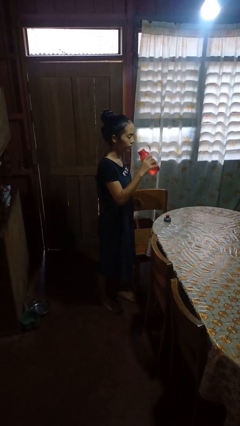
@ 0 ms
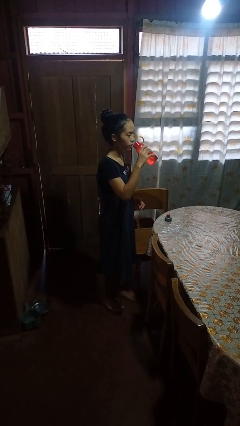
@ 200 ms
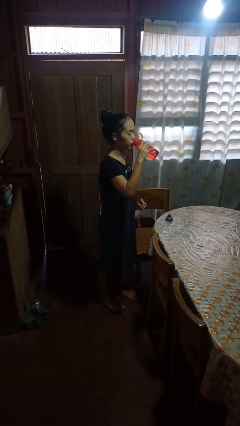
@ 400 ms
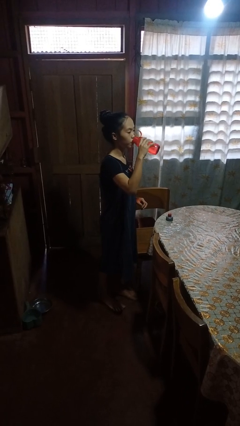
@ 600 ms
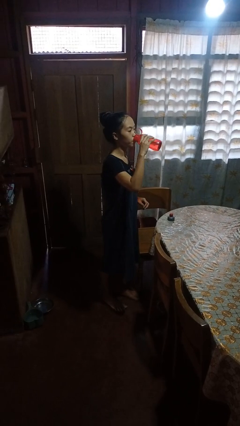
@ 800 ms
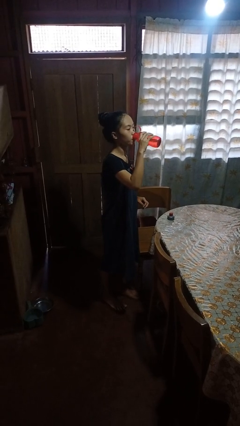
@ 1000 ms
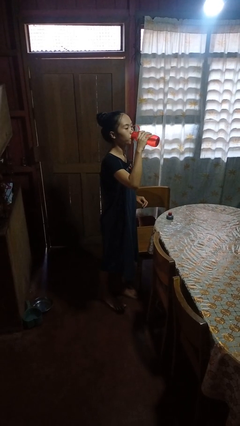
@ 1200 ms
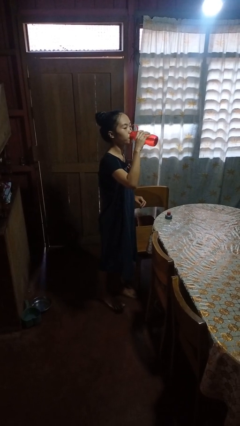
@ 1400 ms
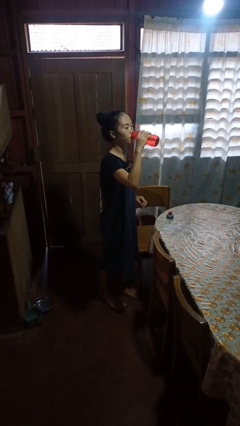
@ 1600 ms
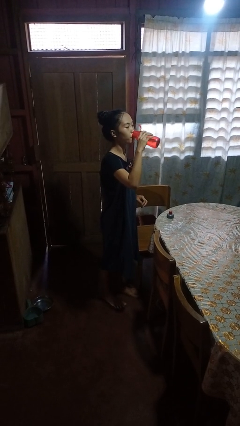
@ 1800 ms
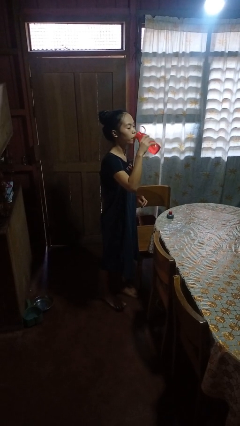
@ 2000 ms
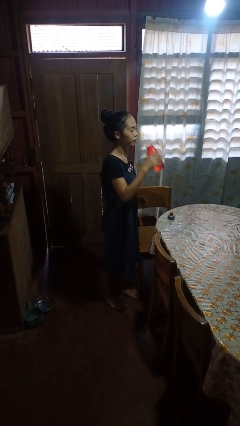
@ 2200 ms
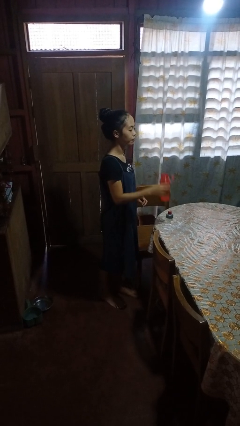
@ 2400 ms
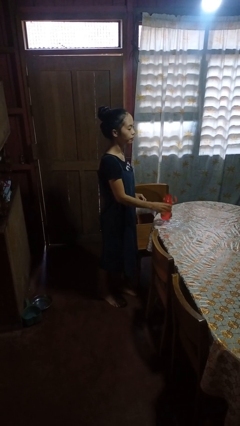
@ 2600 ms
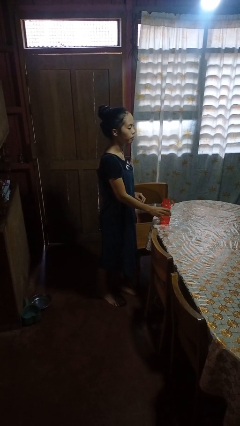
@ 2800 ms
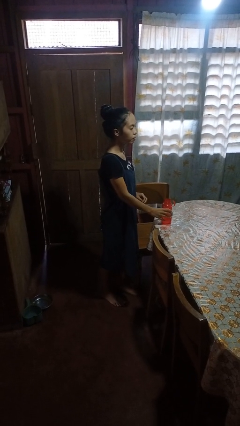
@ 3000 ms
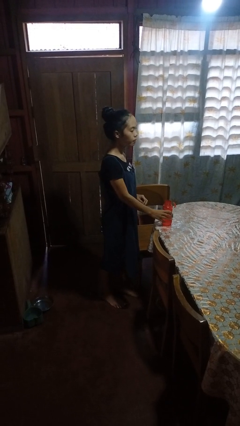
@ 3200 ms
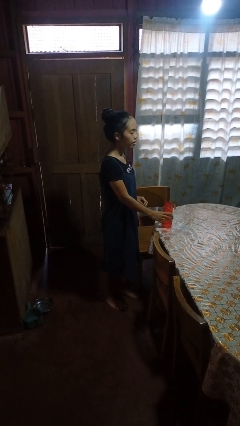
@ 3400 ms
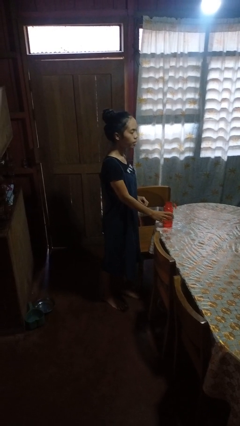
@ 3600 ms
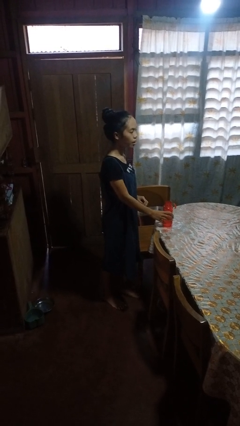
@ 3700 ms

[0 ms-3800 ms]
person drinks from bottle

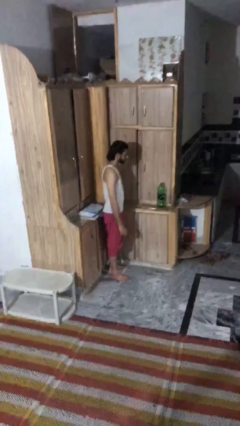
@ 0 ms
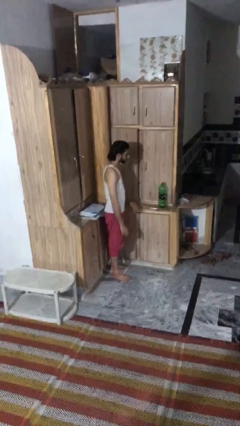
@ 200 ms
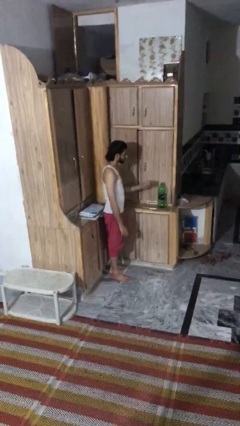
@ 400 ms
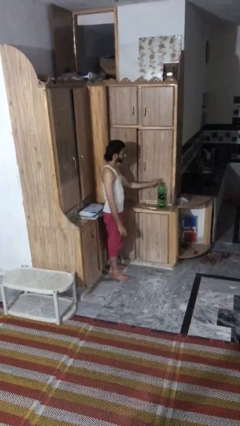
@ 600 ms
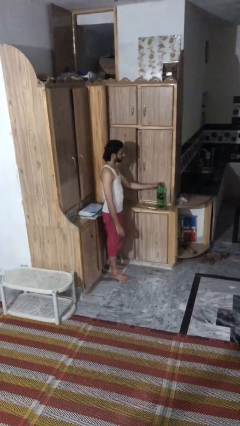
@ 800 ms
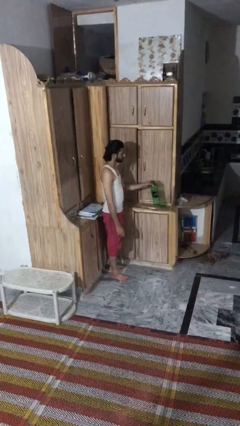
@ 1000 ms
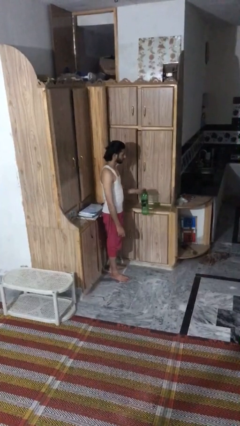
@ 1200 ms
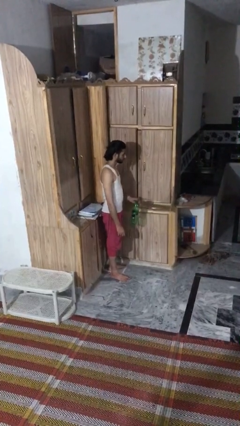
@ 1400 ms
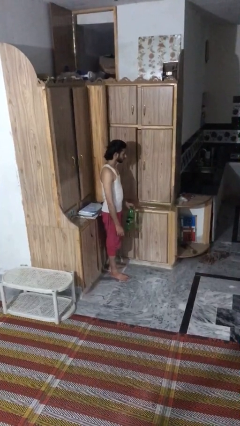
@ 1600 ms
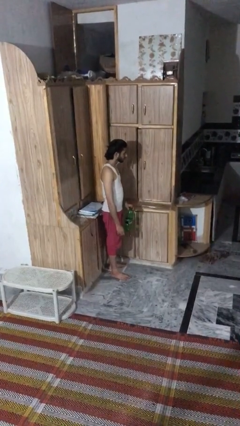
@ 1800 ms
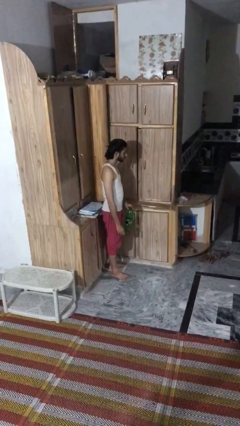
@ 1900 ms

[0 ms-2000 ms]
person picks up object from countertop

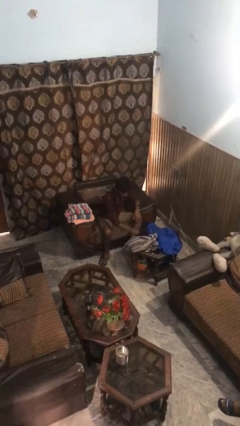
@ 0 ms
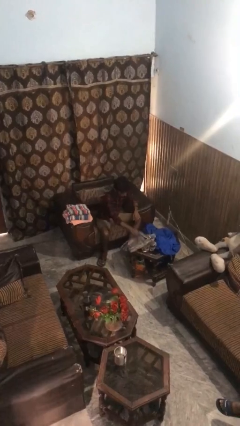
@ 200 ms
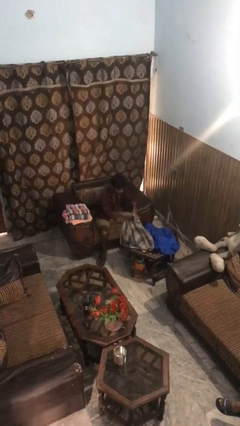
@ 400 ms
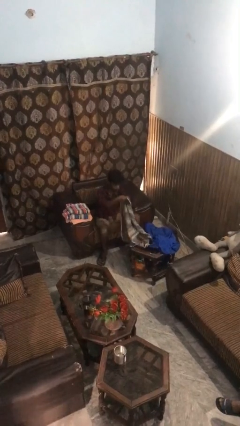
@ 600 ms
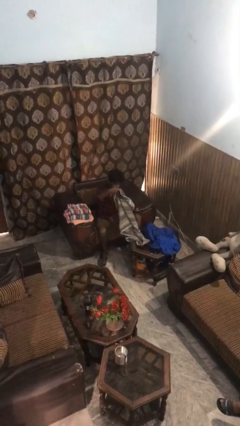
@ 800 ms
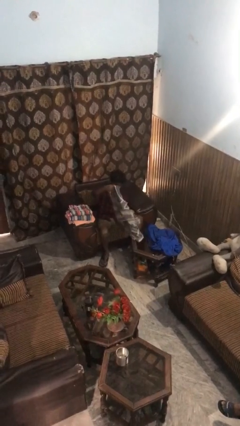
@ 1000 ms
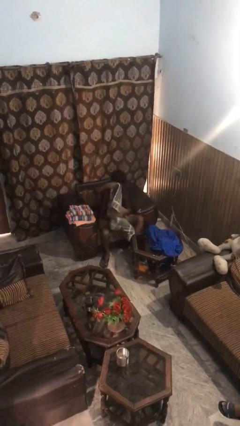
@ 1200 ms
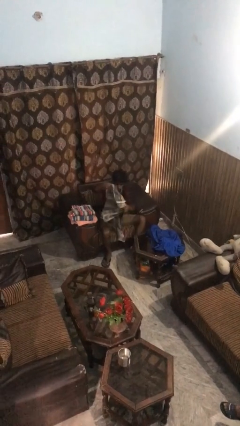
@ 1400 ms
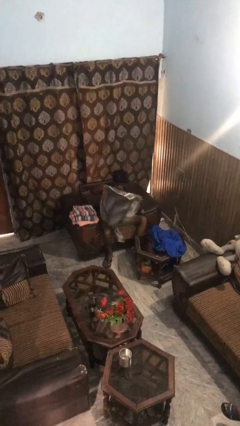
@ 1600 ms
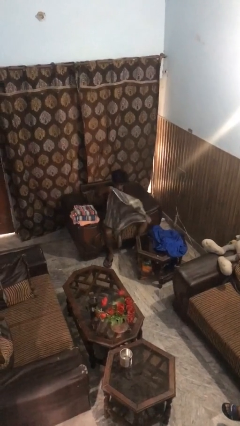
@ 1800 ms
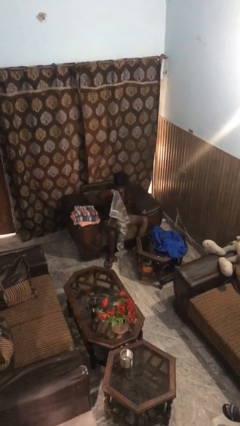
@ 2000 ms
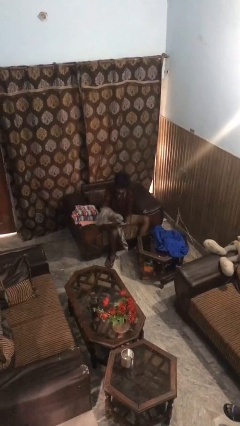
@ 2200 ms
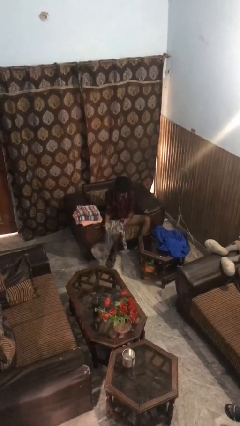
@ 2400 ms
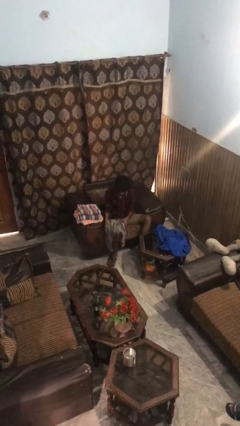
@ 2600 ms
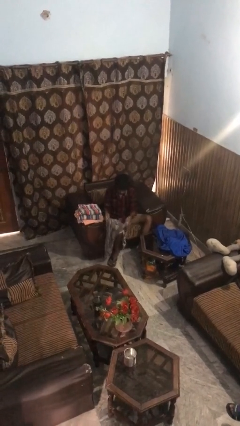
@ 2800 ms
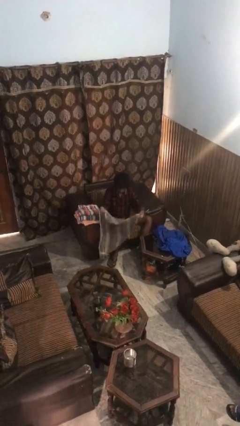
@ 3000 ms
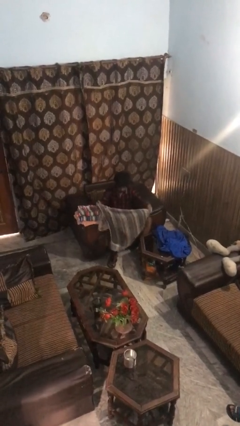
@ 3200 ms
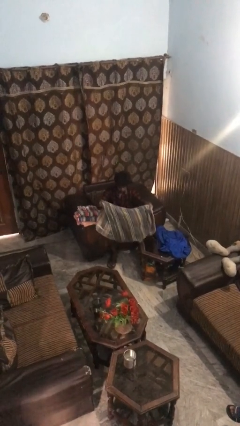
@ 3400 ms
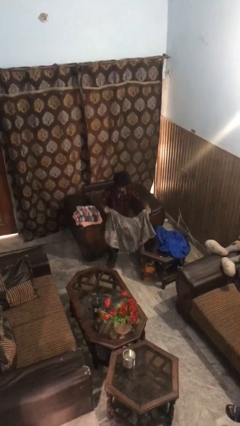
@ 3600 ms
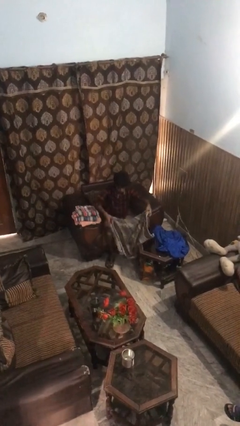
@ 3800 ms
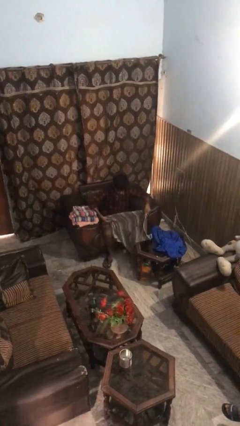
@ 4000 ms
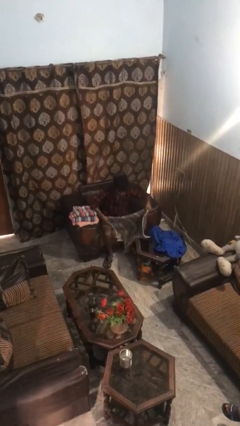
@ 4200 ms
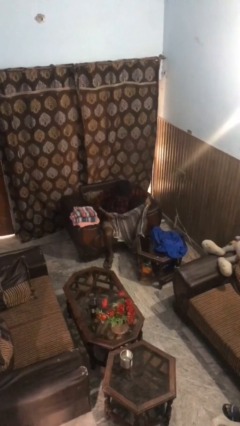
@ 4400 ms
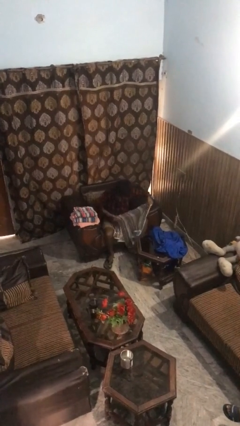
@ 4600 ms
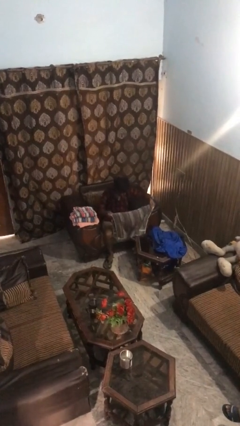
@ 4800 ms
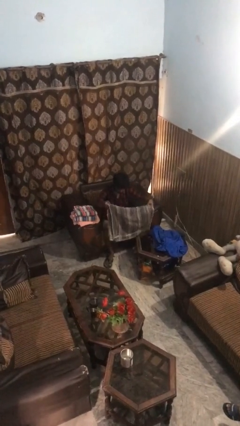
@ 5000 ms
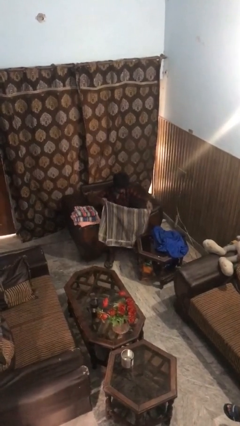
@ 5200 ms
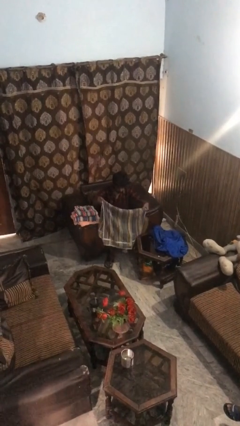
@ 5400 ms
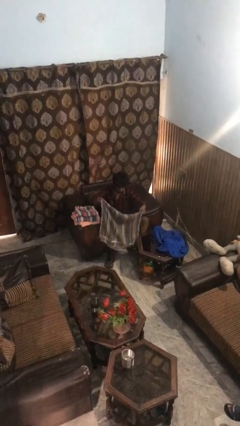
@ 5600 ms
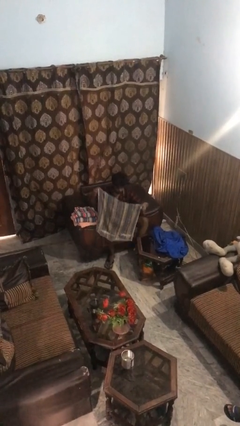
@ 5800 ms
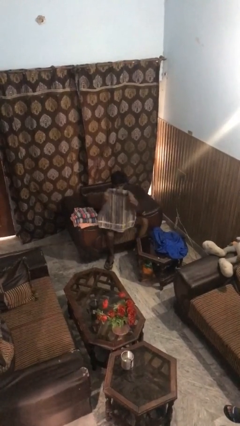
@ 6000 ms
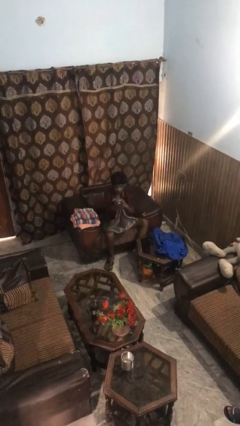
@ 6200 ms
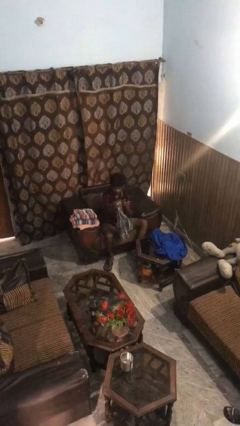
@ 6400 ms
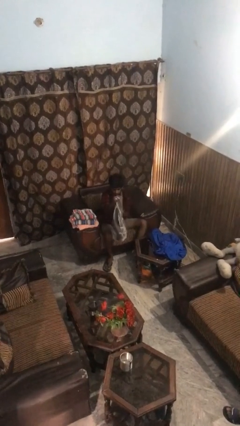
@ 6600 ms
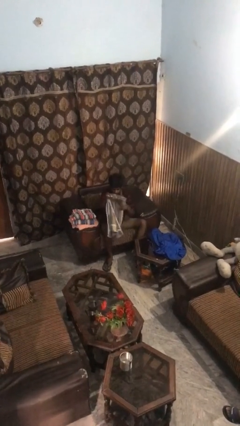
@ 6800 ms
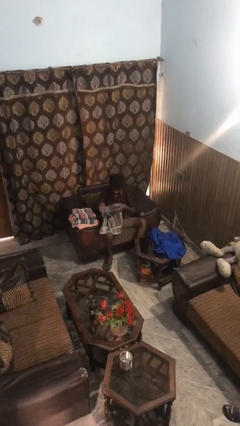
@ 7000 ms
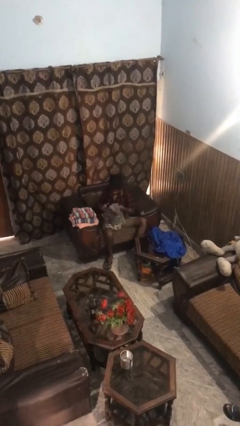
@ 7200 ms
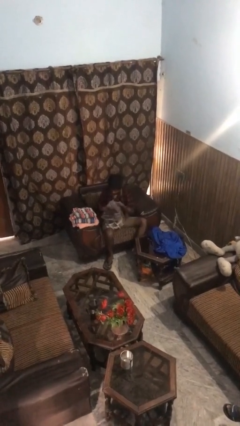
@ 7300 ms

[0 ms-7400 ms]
person folds towel

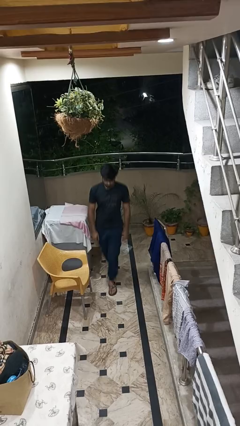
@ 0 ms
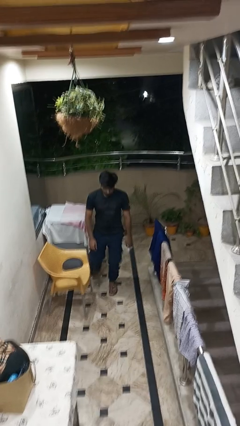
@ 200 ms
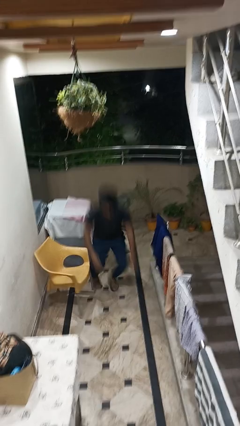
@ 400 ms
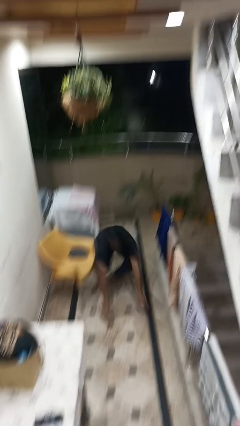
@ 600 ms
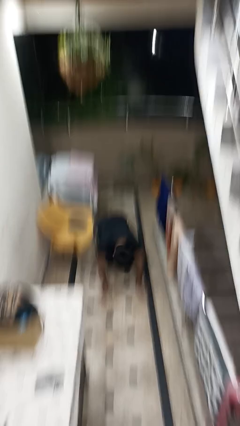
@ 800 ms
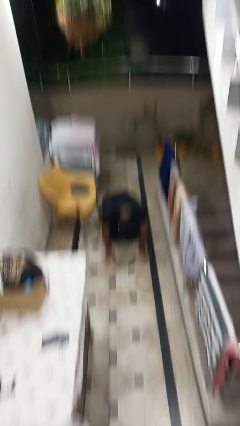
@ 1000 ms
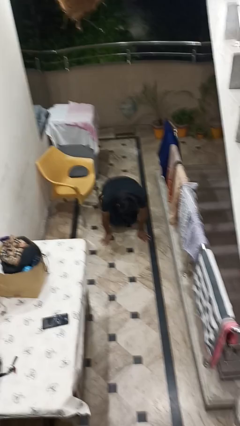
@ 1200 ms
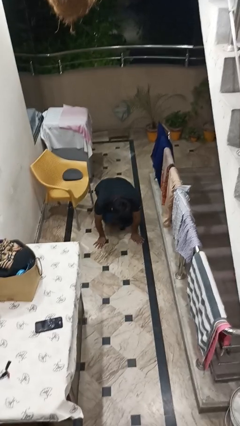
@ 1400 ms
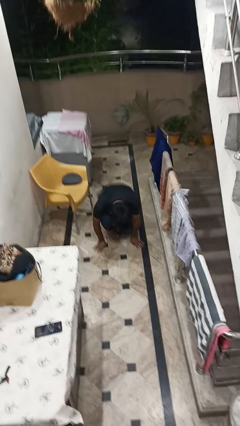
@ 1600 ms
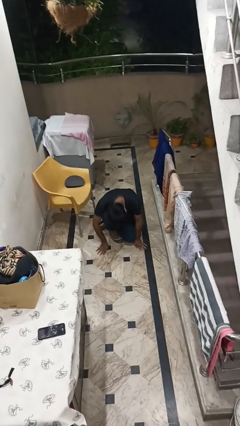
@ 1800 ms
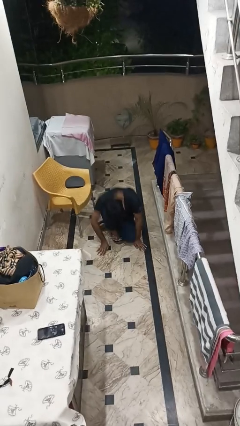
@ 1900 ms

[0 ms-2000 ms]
person trips on object on floor

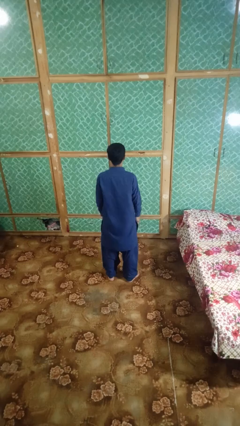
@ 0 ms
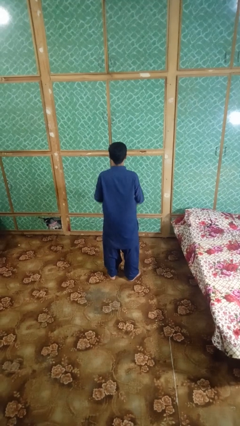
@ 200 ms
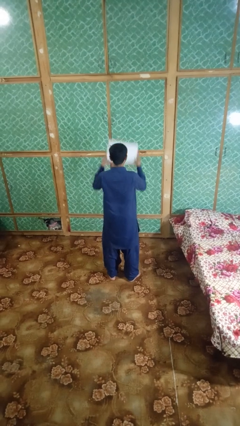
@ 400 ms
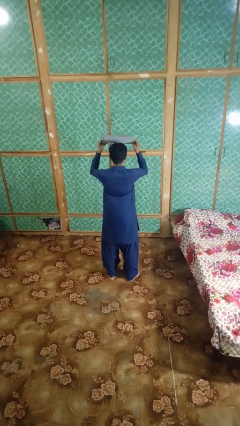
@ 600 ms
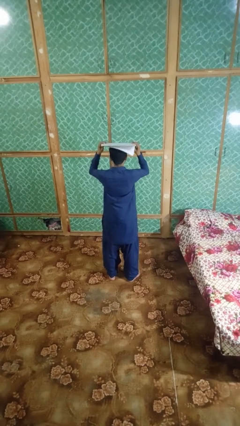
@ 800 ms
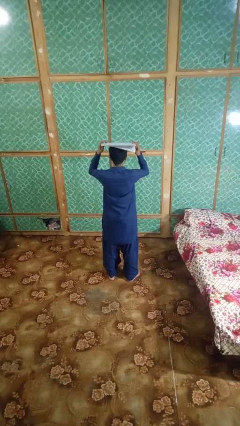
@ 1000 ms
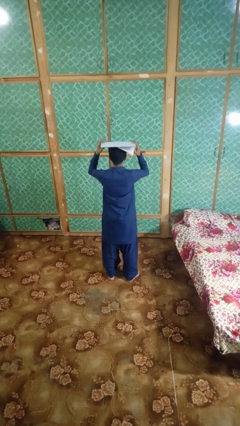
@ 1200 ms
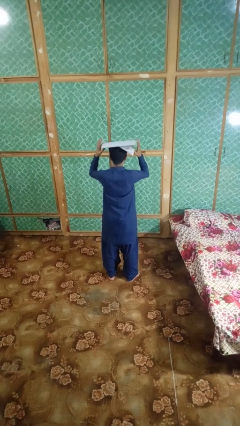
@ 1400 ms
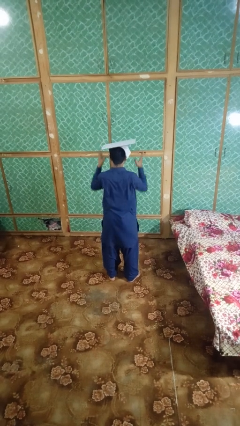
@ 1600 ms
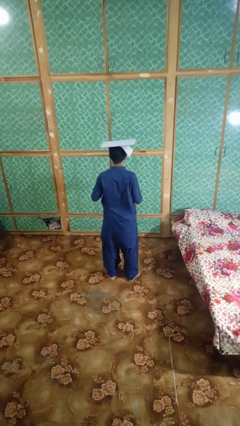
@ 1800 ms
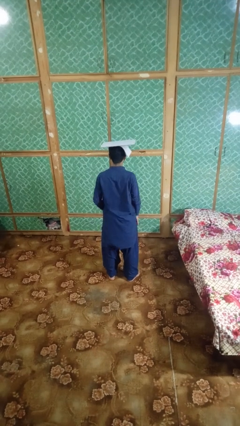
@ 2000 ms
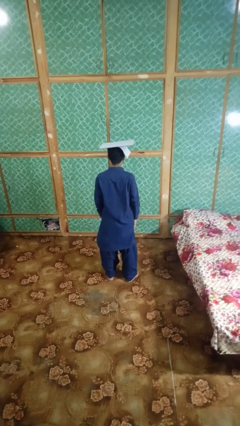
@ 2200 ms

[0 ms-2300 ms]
person holds object above head
